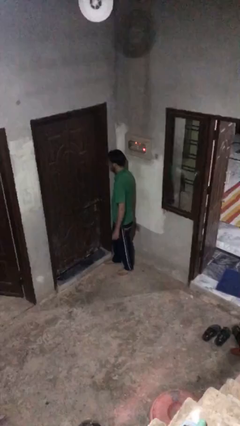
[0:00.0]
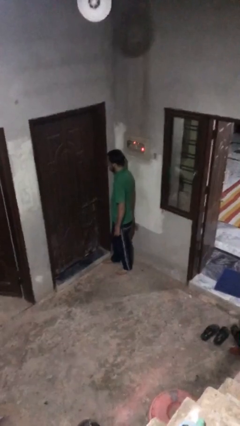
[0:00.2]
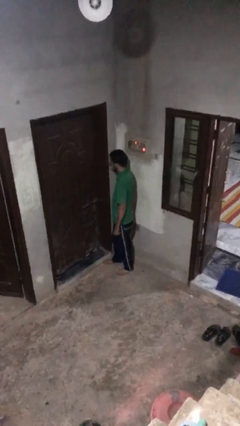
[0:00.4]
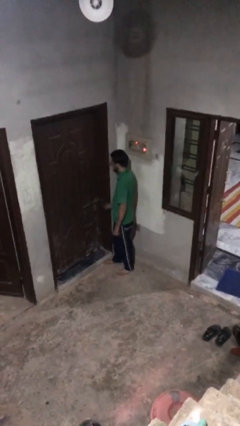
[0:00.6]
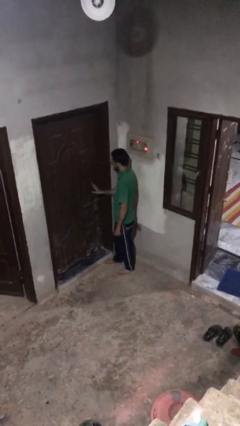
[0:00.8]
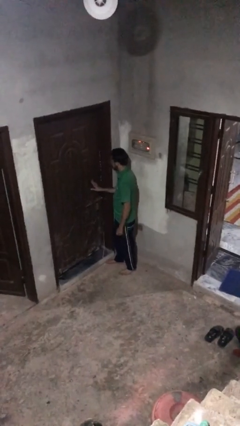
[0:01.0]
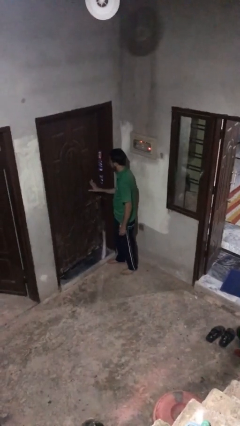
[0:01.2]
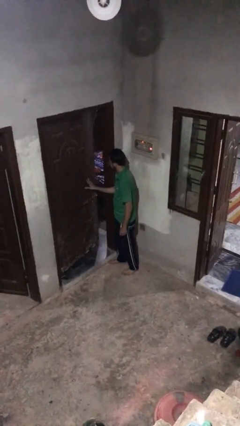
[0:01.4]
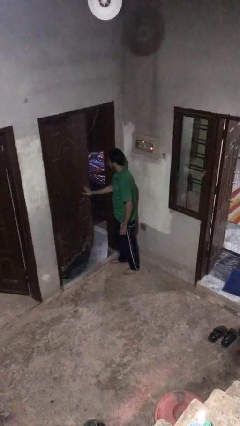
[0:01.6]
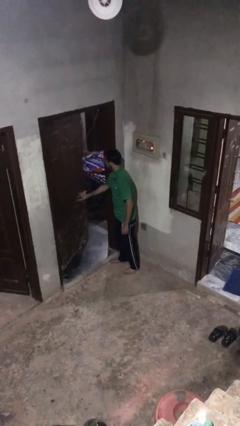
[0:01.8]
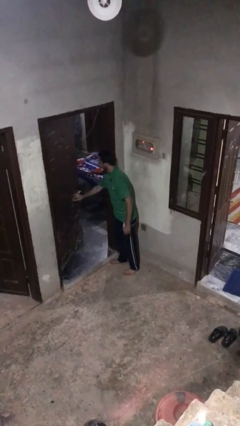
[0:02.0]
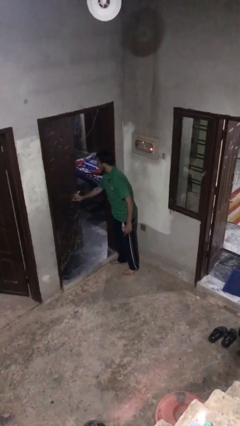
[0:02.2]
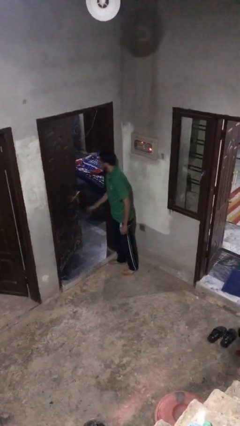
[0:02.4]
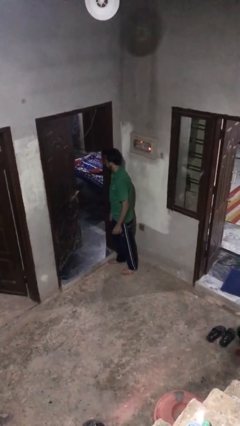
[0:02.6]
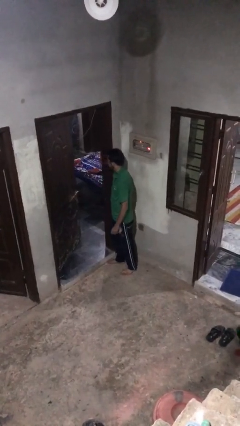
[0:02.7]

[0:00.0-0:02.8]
person opens facility door

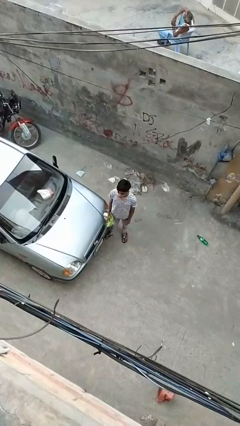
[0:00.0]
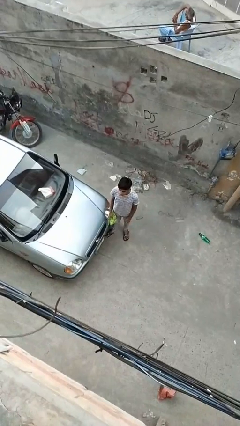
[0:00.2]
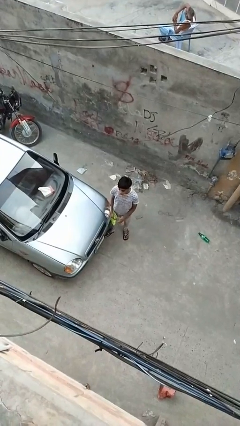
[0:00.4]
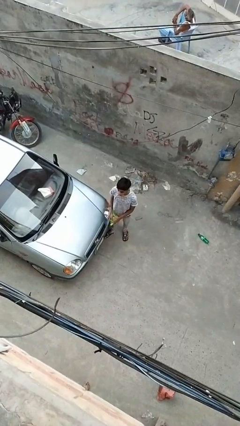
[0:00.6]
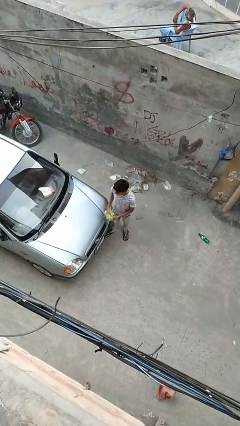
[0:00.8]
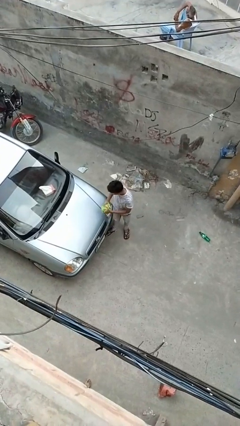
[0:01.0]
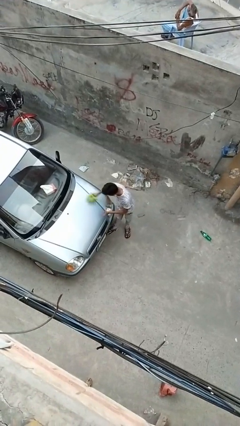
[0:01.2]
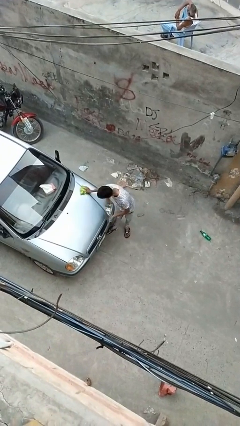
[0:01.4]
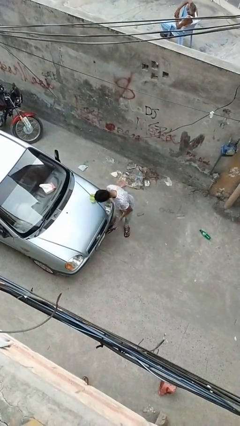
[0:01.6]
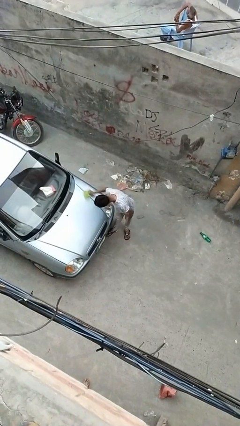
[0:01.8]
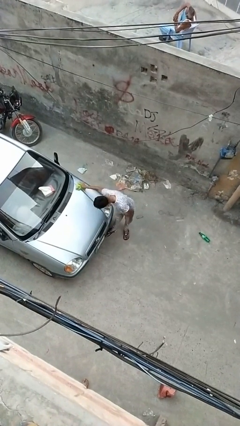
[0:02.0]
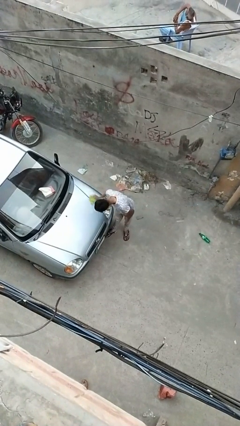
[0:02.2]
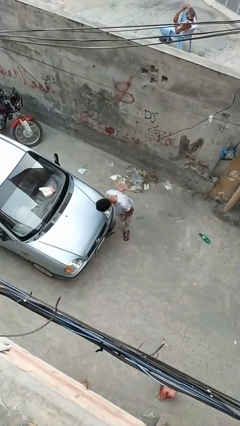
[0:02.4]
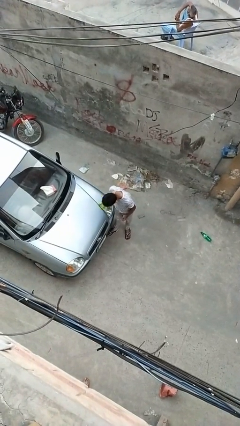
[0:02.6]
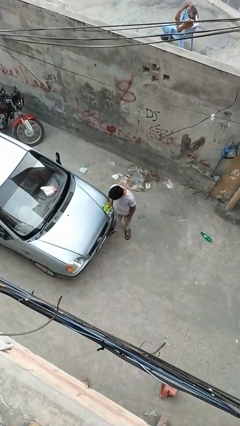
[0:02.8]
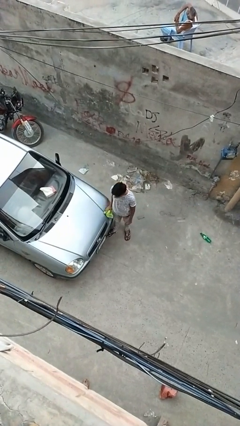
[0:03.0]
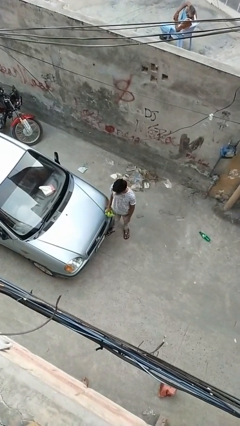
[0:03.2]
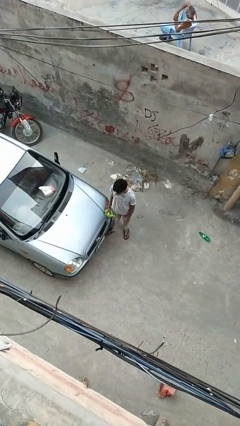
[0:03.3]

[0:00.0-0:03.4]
person polishes car with rag

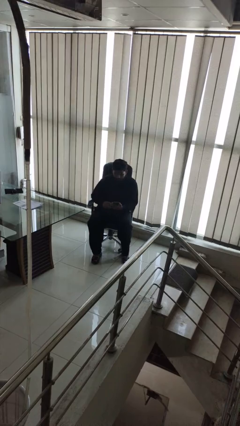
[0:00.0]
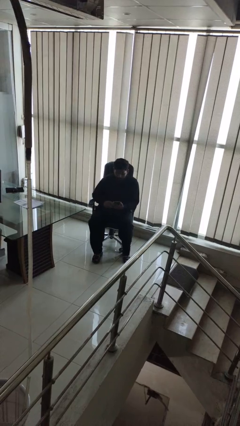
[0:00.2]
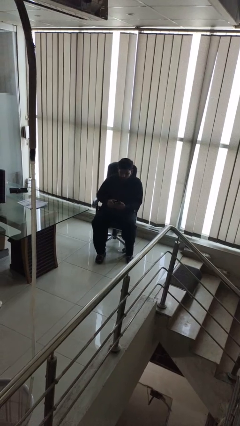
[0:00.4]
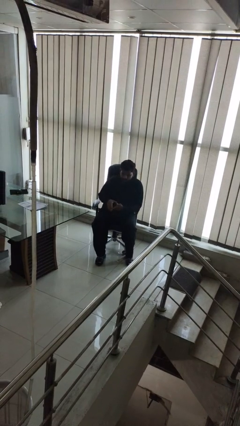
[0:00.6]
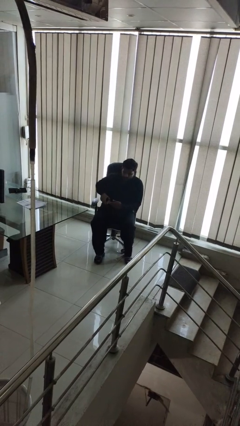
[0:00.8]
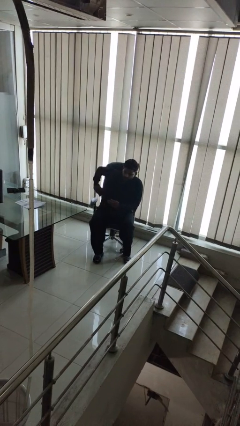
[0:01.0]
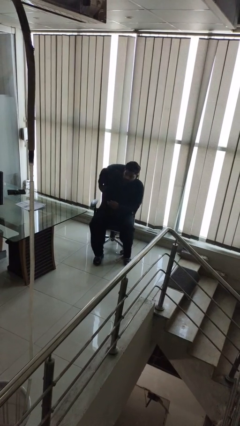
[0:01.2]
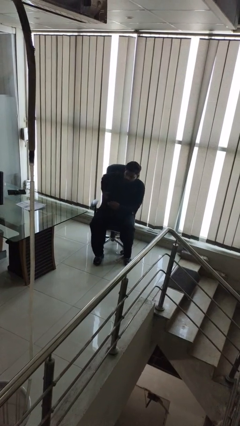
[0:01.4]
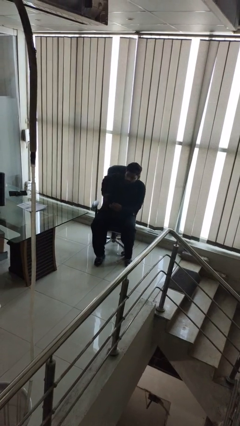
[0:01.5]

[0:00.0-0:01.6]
person puts phone into pocket

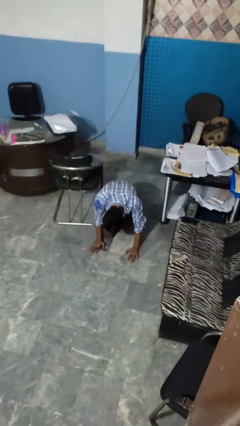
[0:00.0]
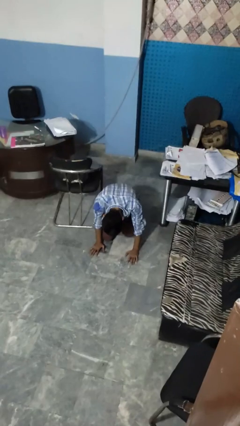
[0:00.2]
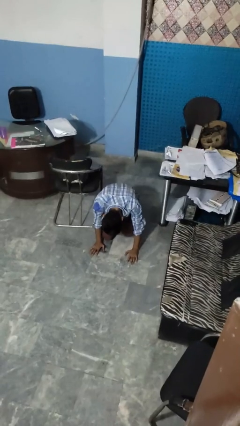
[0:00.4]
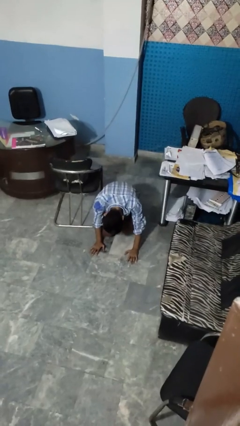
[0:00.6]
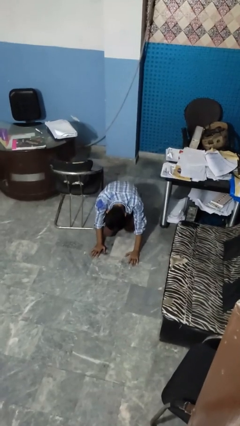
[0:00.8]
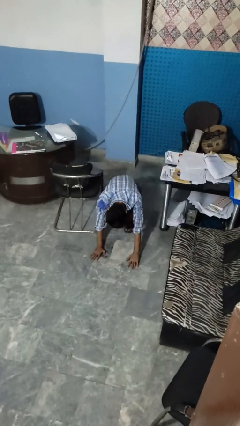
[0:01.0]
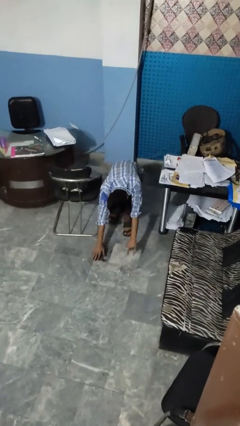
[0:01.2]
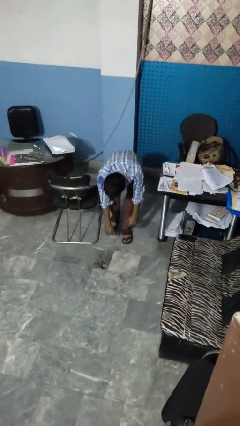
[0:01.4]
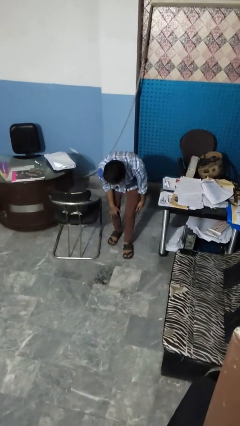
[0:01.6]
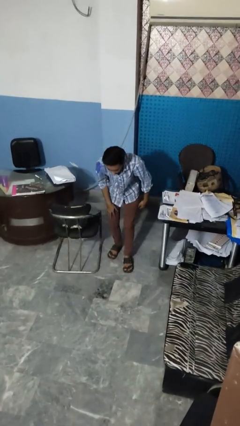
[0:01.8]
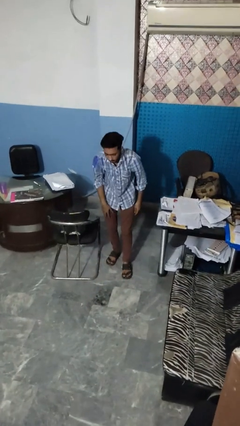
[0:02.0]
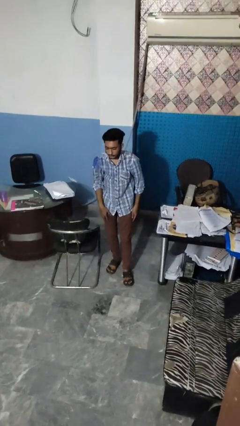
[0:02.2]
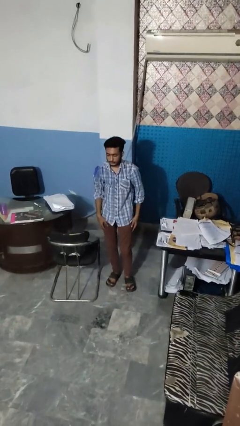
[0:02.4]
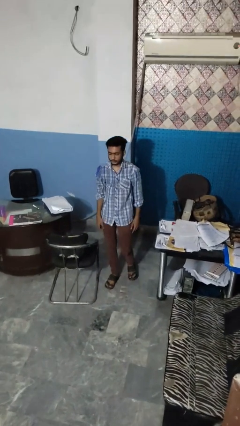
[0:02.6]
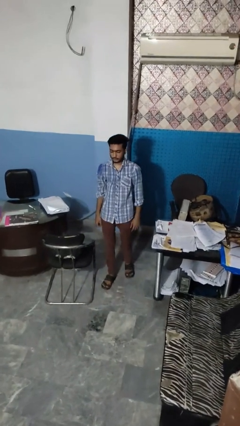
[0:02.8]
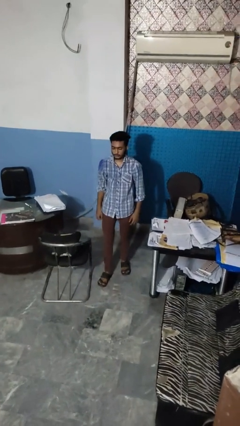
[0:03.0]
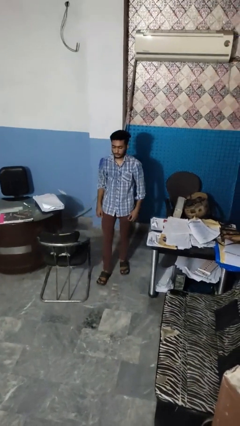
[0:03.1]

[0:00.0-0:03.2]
person stands up from floor

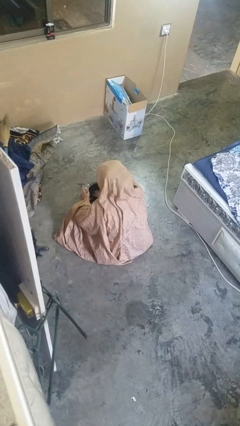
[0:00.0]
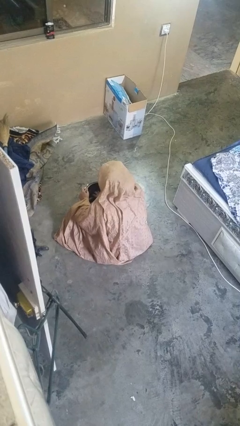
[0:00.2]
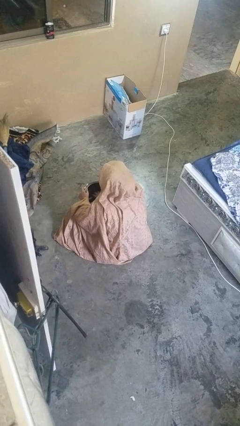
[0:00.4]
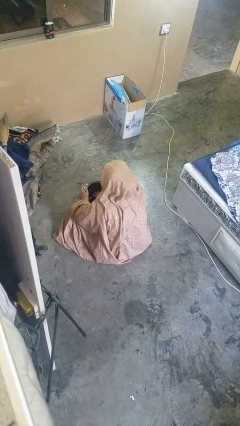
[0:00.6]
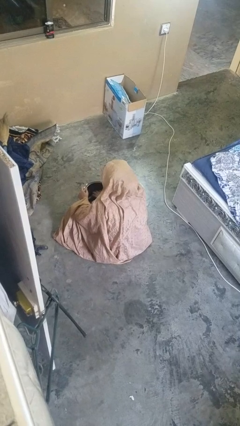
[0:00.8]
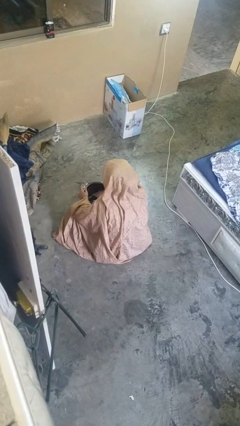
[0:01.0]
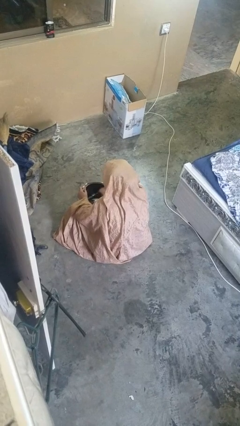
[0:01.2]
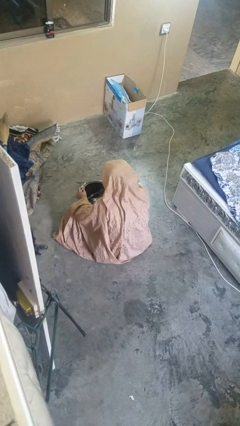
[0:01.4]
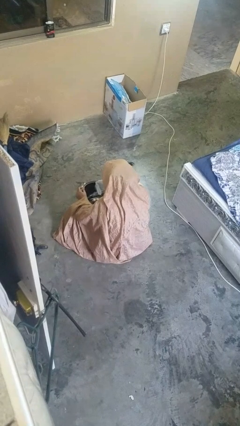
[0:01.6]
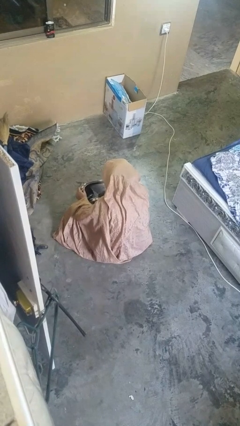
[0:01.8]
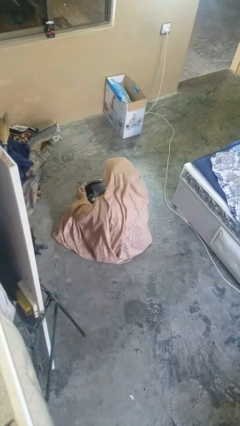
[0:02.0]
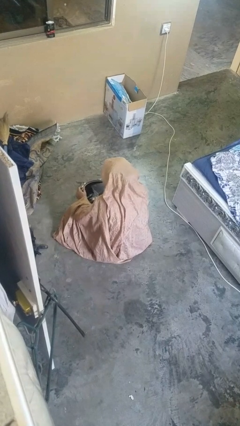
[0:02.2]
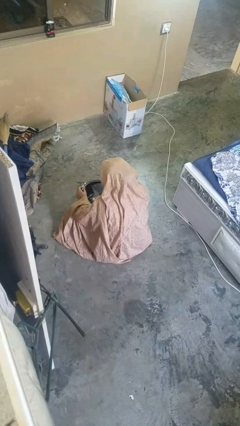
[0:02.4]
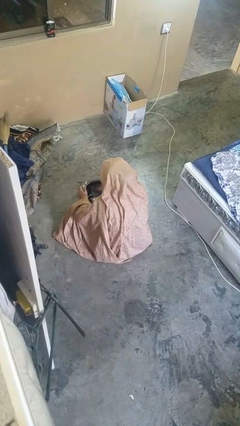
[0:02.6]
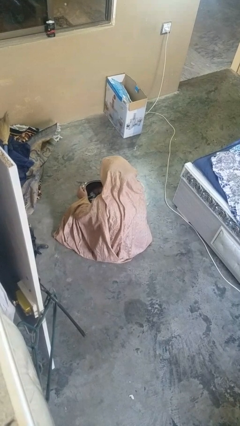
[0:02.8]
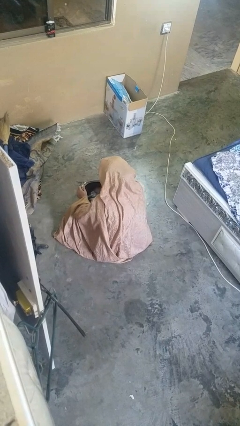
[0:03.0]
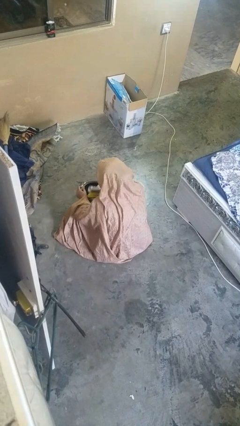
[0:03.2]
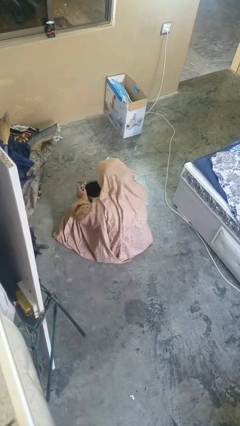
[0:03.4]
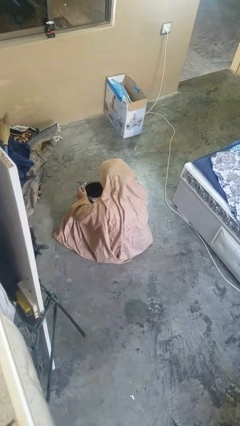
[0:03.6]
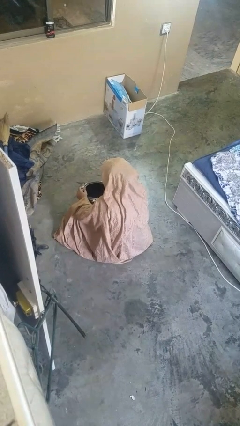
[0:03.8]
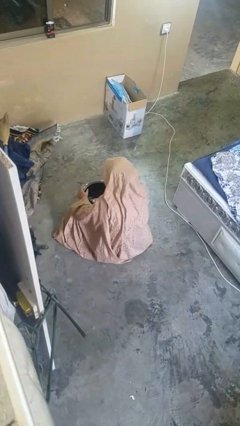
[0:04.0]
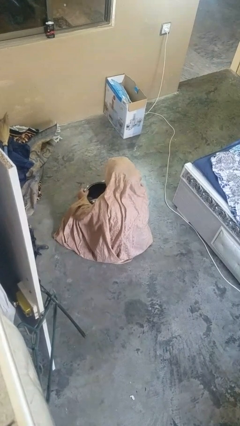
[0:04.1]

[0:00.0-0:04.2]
person takes object from purse

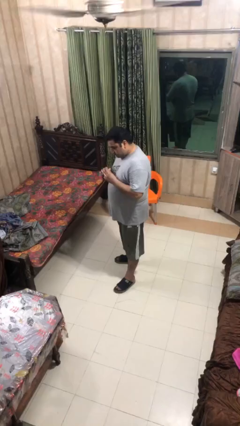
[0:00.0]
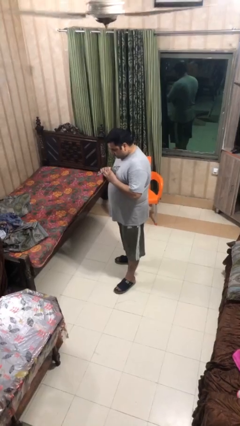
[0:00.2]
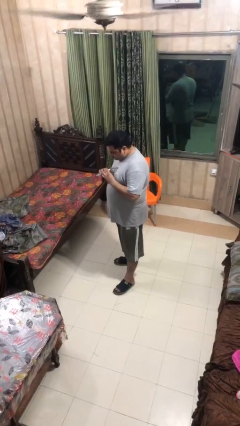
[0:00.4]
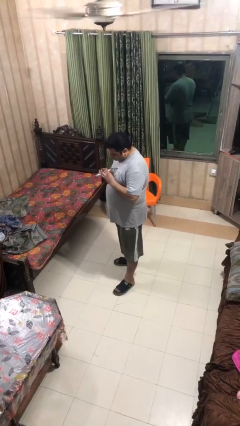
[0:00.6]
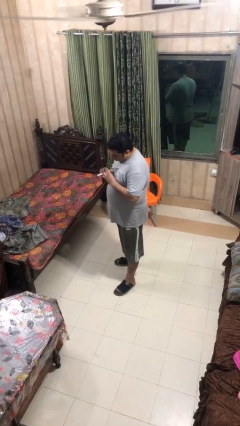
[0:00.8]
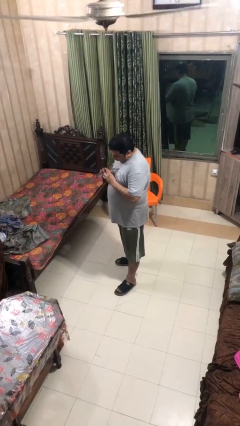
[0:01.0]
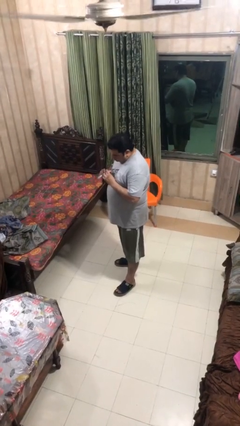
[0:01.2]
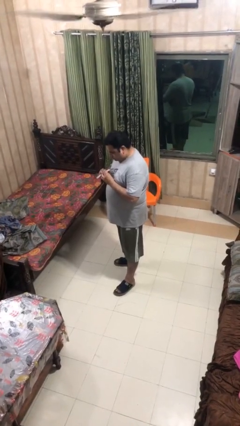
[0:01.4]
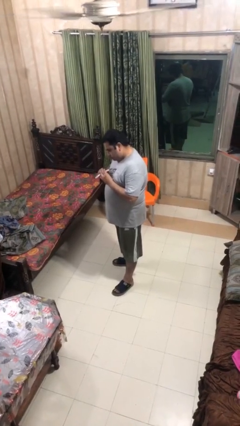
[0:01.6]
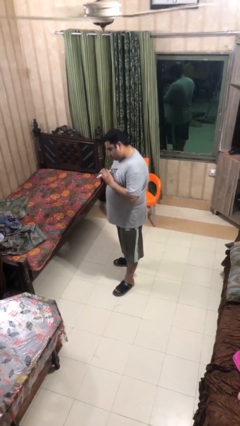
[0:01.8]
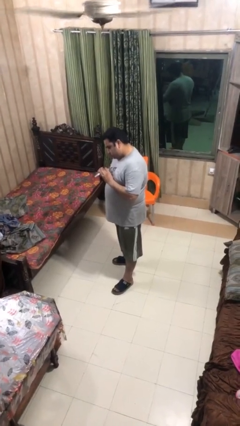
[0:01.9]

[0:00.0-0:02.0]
person files fingernails

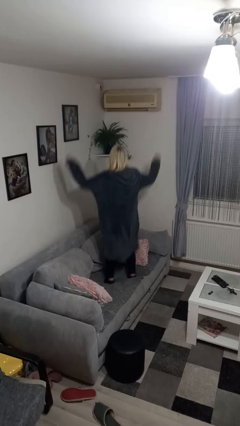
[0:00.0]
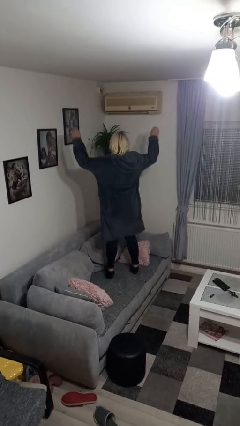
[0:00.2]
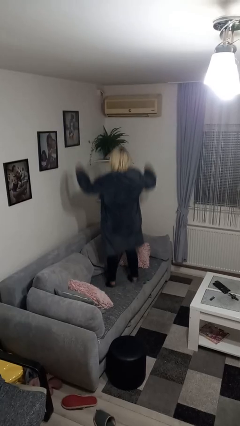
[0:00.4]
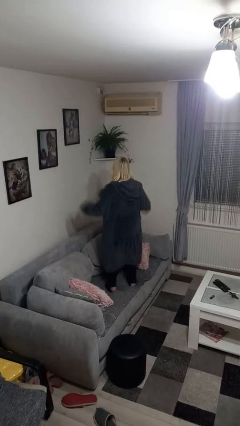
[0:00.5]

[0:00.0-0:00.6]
person jumps on couch
